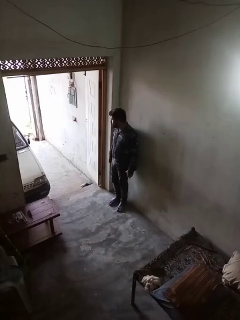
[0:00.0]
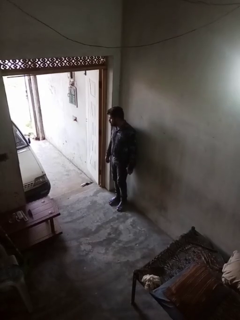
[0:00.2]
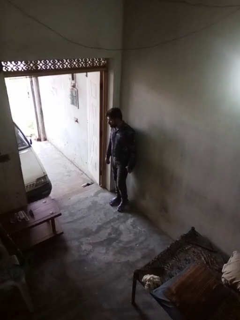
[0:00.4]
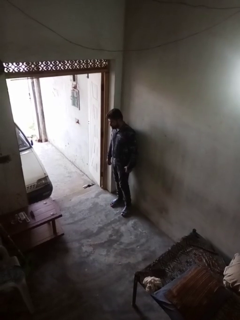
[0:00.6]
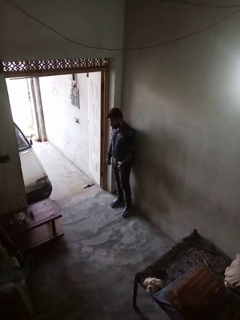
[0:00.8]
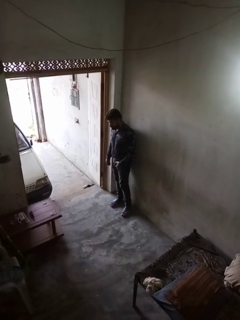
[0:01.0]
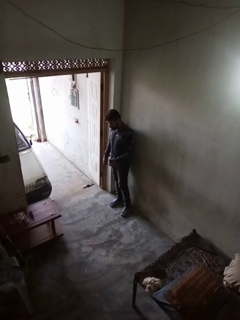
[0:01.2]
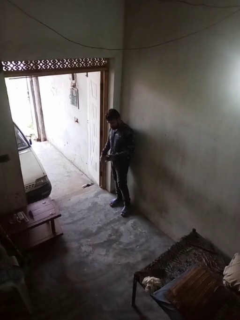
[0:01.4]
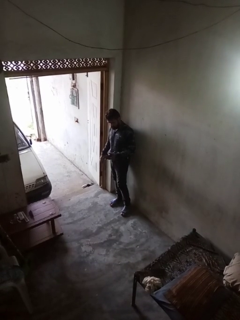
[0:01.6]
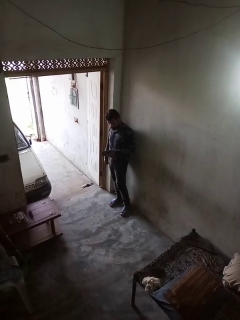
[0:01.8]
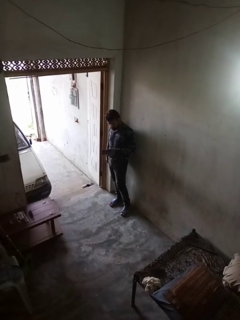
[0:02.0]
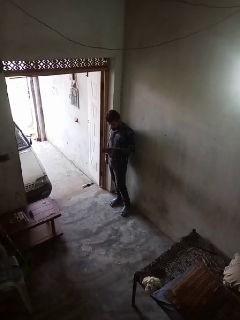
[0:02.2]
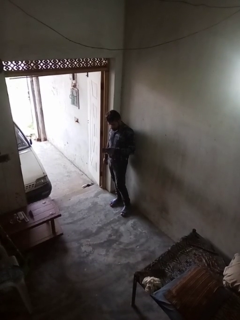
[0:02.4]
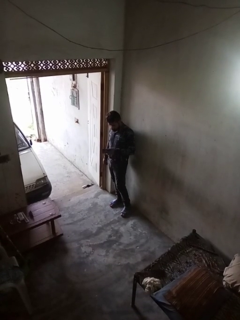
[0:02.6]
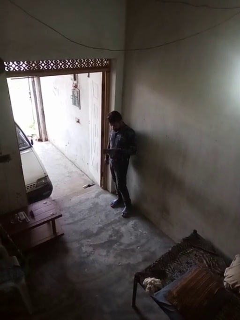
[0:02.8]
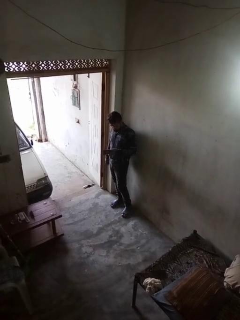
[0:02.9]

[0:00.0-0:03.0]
person searches in purse

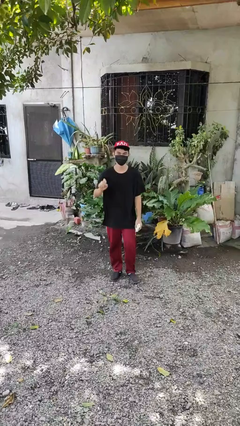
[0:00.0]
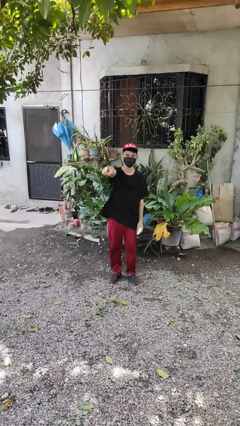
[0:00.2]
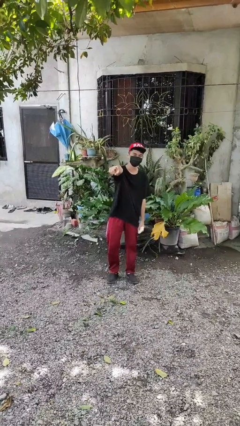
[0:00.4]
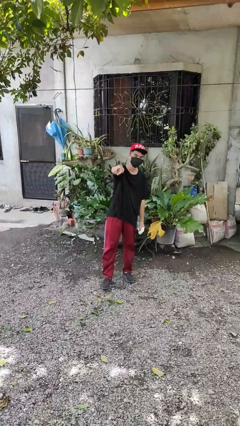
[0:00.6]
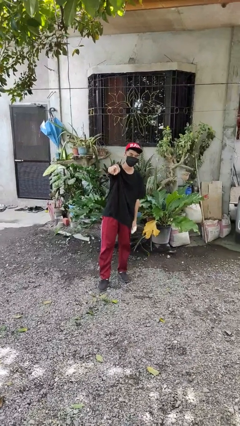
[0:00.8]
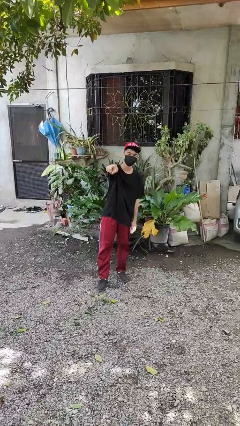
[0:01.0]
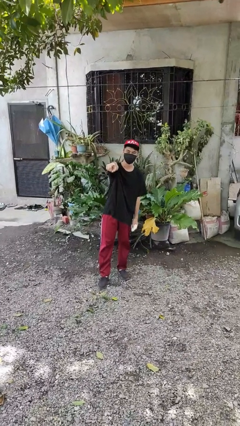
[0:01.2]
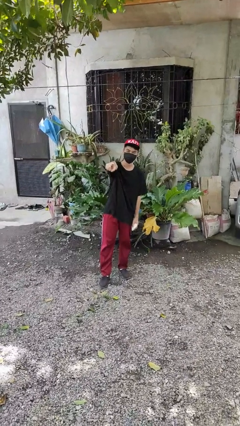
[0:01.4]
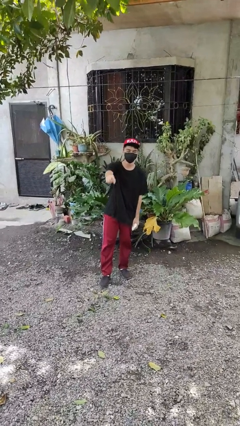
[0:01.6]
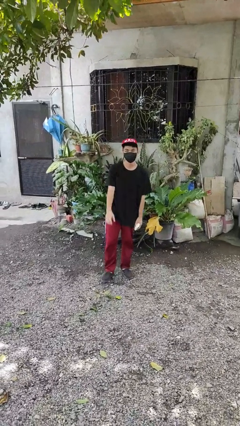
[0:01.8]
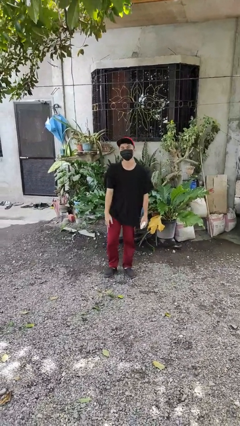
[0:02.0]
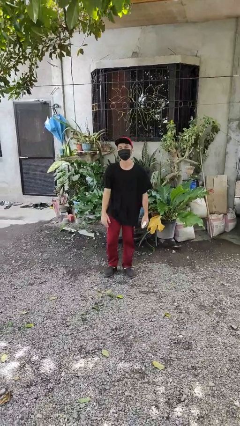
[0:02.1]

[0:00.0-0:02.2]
person points at person

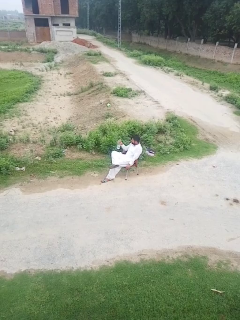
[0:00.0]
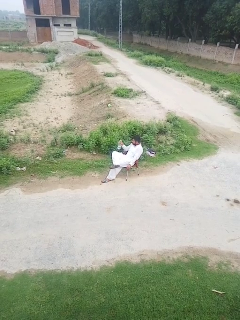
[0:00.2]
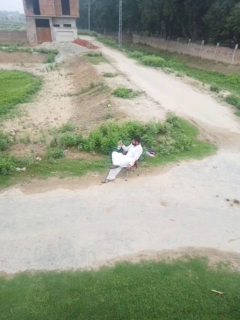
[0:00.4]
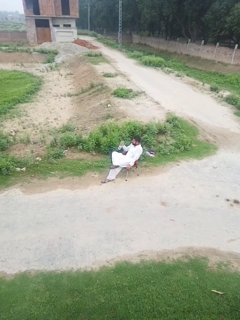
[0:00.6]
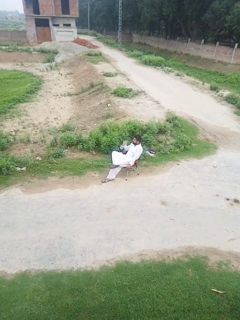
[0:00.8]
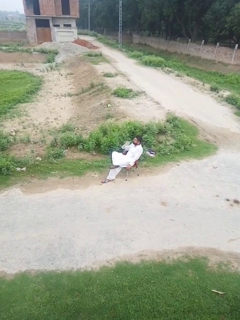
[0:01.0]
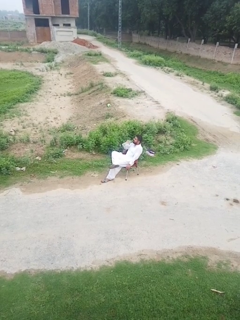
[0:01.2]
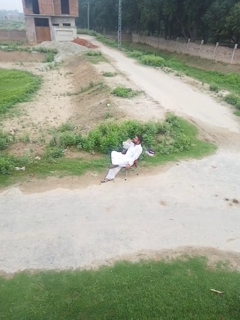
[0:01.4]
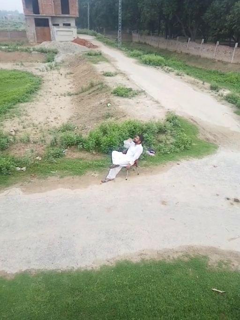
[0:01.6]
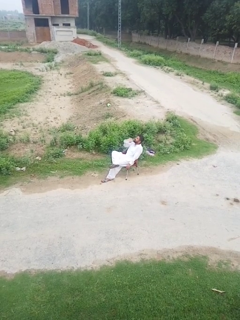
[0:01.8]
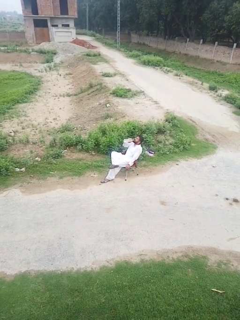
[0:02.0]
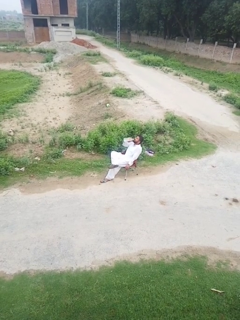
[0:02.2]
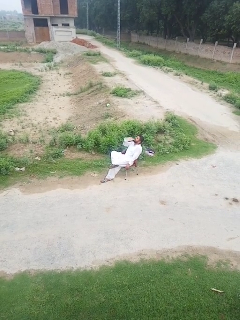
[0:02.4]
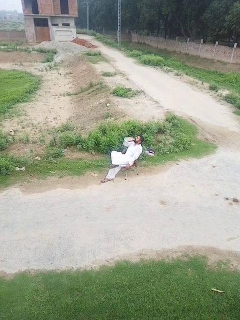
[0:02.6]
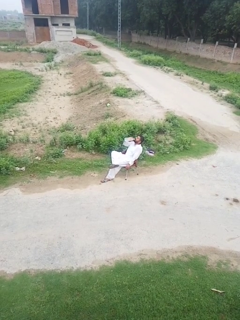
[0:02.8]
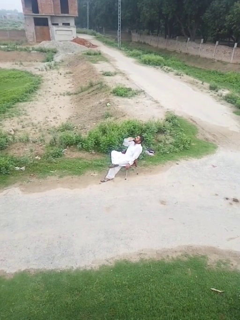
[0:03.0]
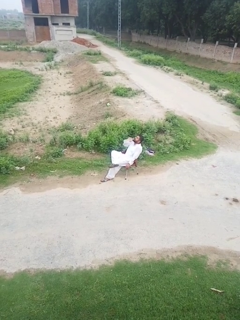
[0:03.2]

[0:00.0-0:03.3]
person drinks from bottle

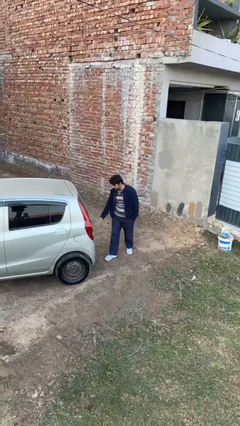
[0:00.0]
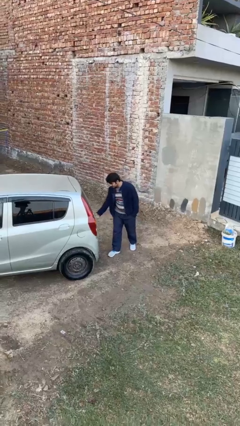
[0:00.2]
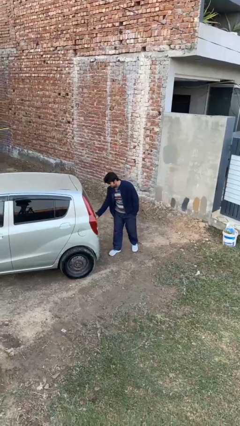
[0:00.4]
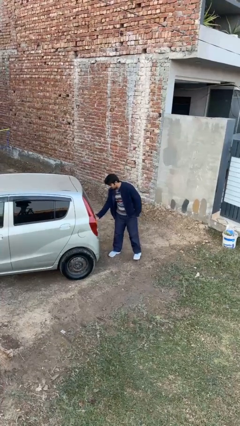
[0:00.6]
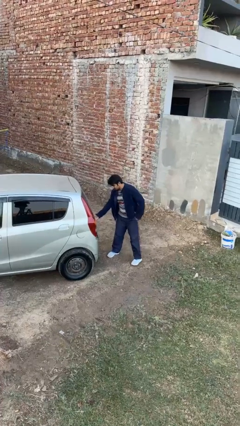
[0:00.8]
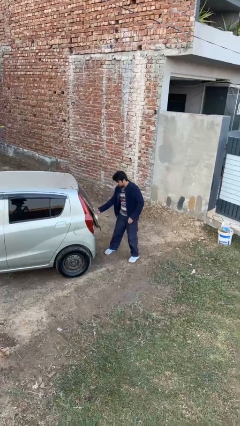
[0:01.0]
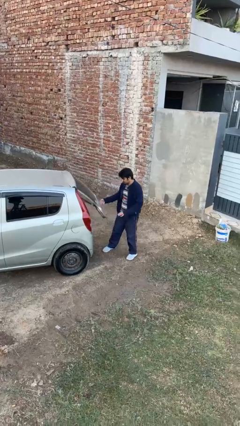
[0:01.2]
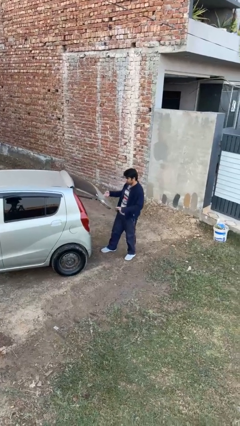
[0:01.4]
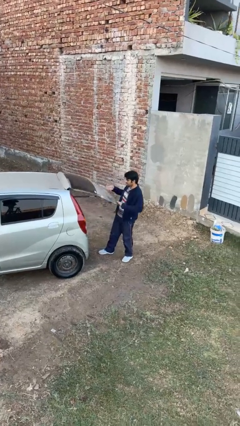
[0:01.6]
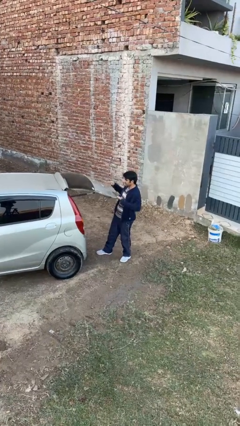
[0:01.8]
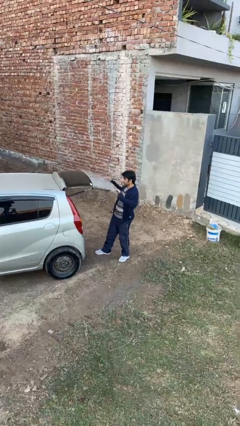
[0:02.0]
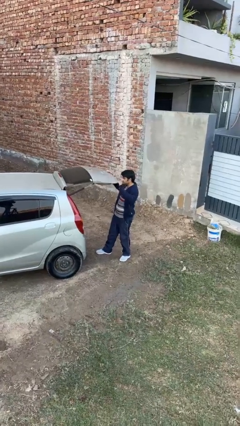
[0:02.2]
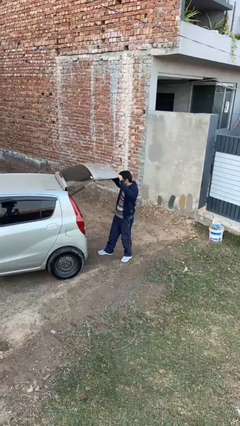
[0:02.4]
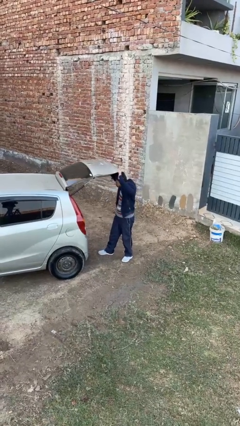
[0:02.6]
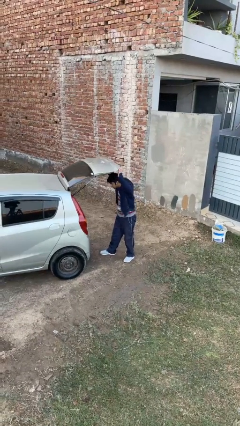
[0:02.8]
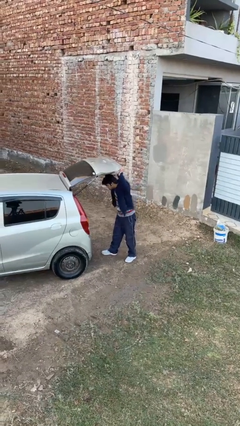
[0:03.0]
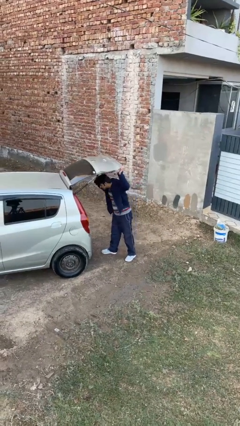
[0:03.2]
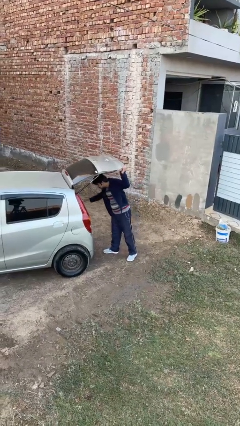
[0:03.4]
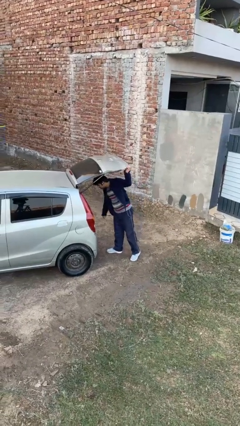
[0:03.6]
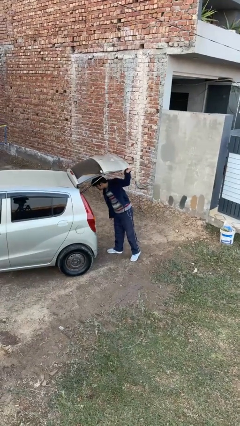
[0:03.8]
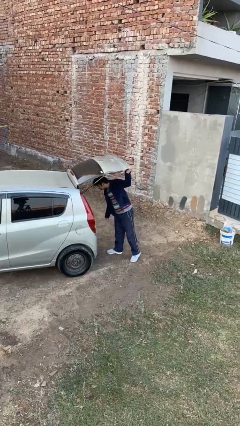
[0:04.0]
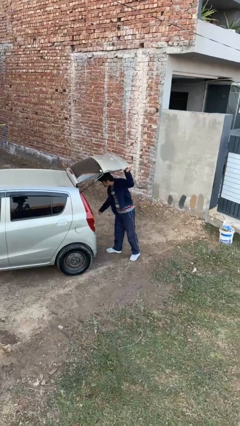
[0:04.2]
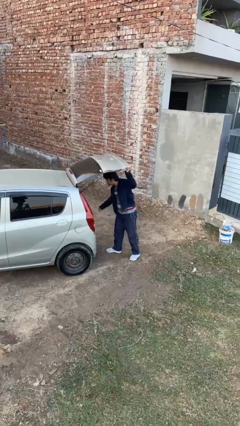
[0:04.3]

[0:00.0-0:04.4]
person opens car trunk

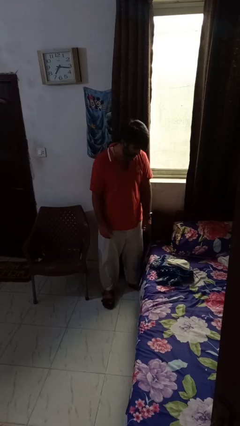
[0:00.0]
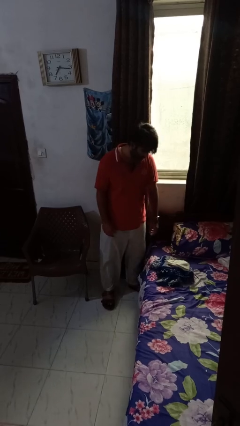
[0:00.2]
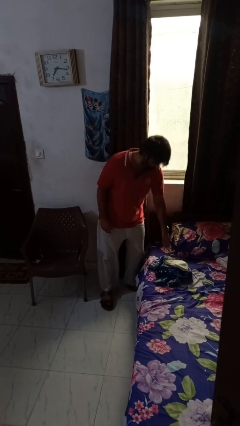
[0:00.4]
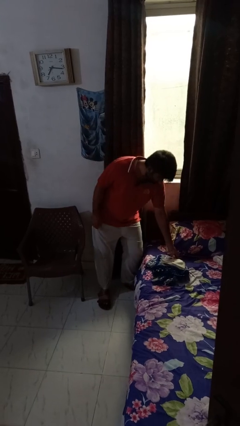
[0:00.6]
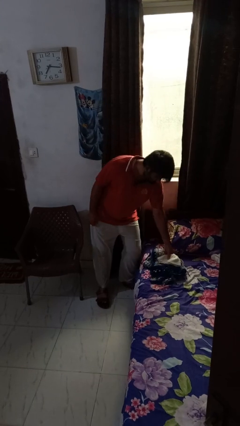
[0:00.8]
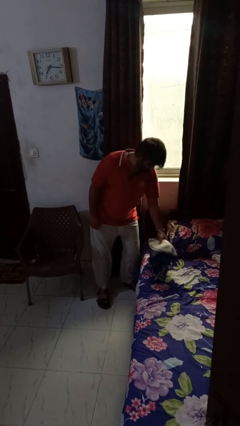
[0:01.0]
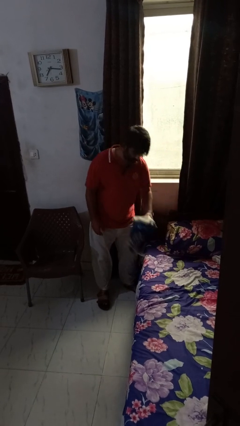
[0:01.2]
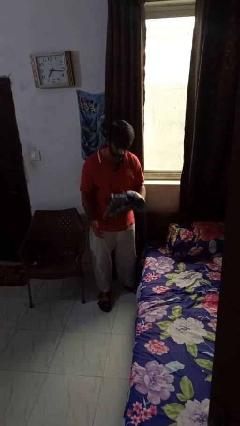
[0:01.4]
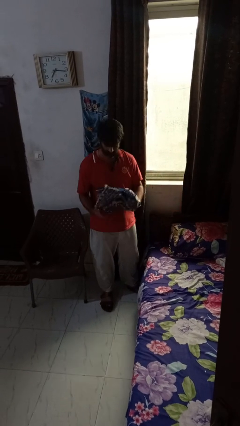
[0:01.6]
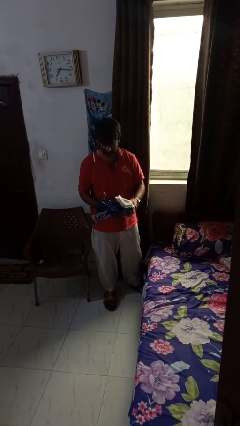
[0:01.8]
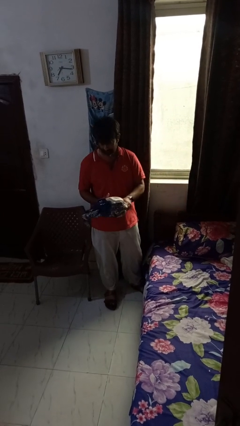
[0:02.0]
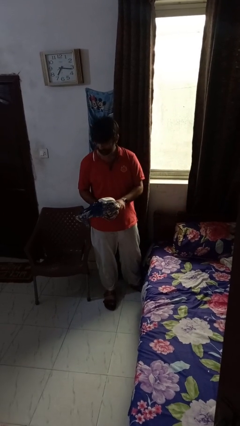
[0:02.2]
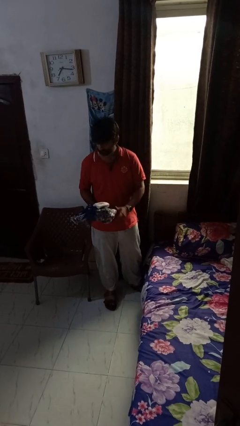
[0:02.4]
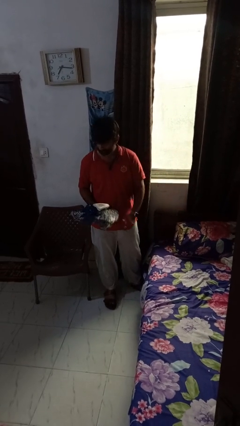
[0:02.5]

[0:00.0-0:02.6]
person picks up object from bed

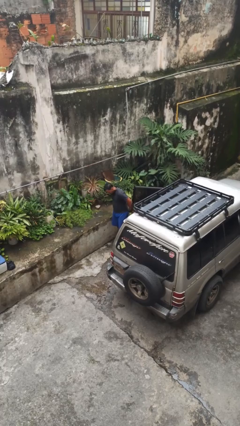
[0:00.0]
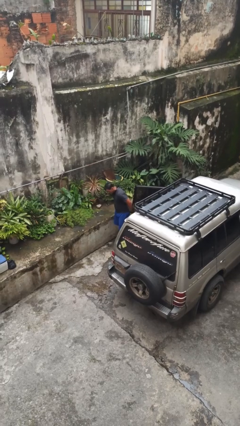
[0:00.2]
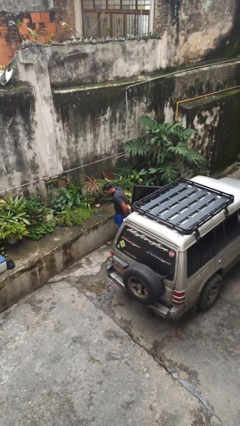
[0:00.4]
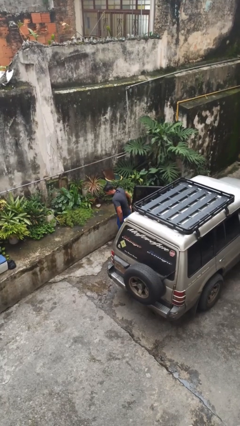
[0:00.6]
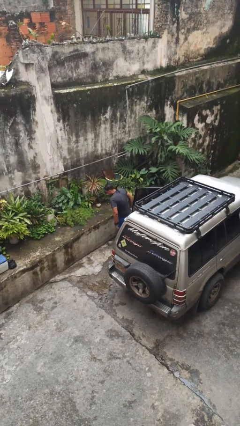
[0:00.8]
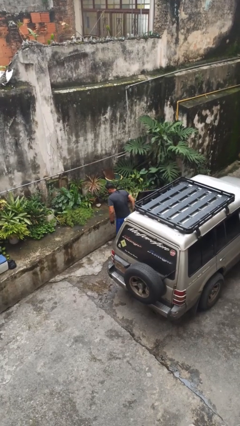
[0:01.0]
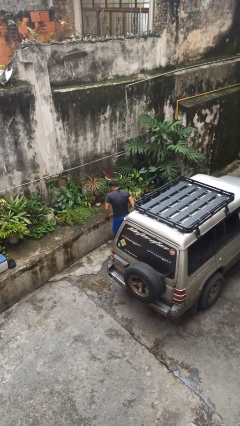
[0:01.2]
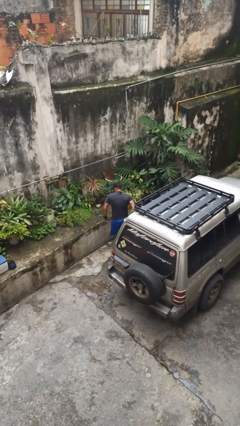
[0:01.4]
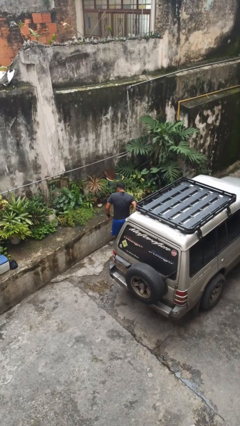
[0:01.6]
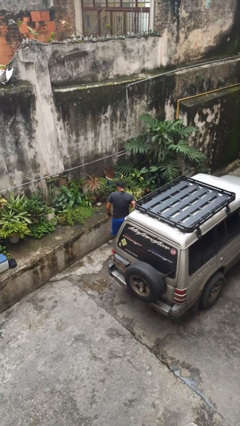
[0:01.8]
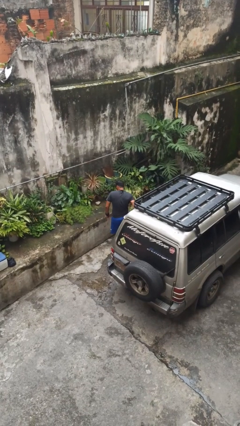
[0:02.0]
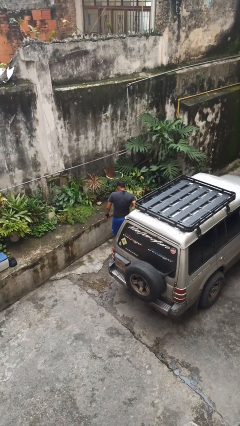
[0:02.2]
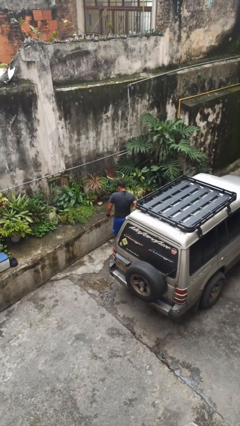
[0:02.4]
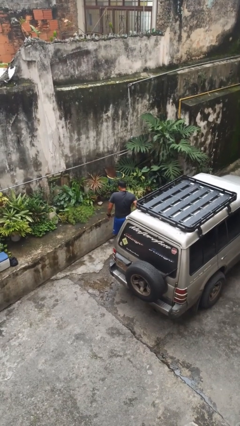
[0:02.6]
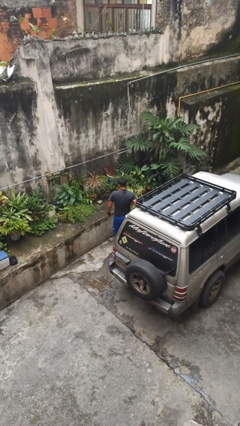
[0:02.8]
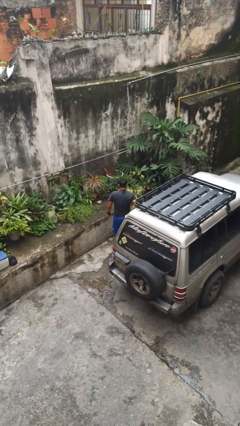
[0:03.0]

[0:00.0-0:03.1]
person closes car door

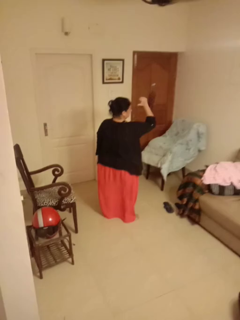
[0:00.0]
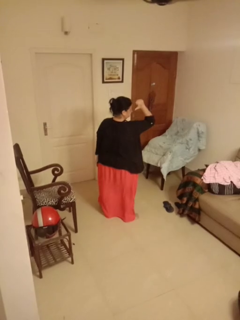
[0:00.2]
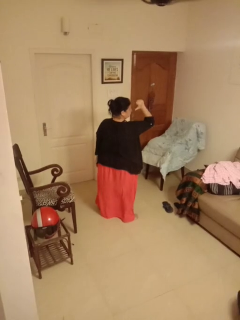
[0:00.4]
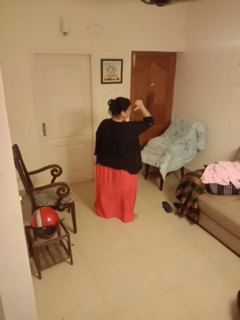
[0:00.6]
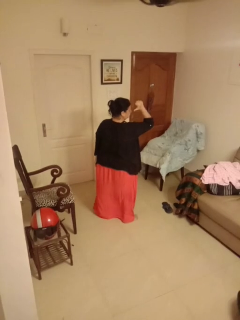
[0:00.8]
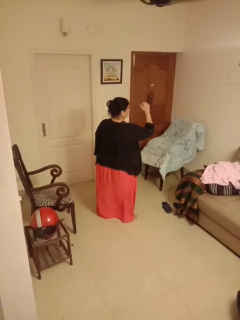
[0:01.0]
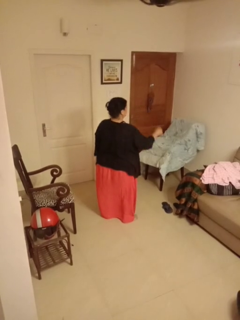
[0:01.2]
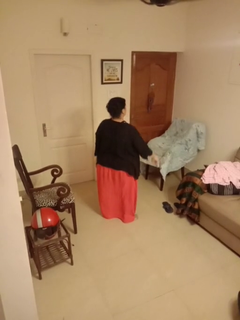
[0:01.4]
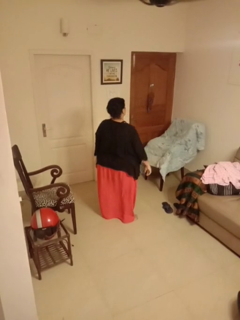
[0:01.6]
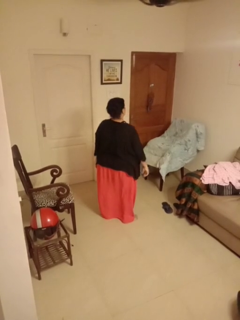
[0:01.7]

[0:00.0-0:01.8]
person gestures behind me
